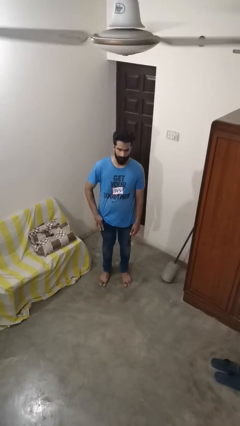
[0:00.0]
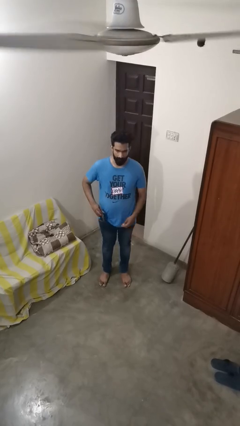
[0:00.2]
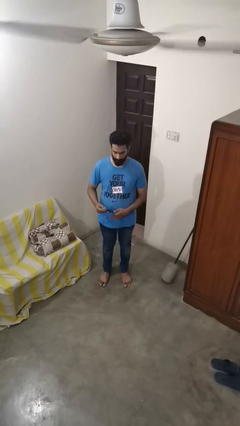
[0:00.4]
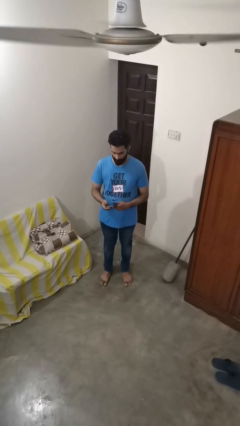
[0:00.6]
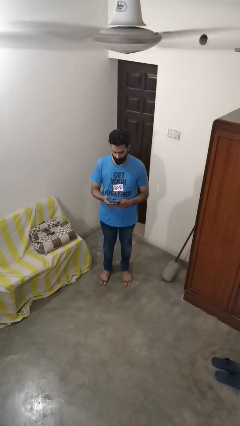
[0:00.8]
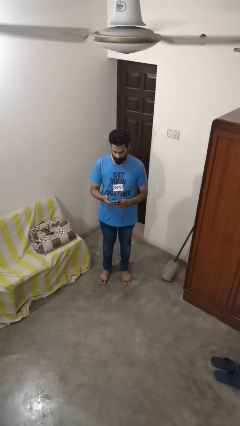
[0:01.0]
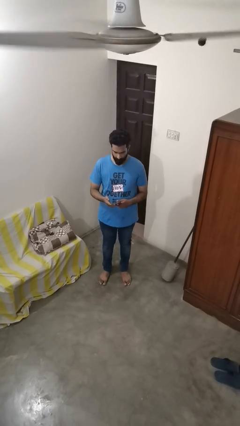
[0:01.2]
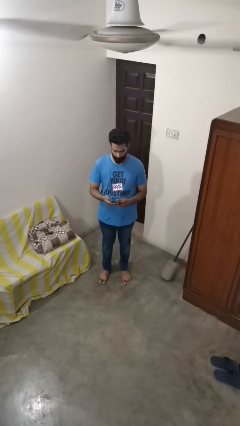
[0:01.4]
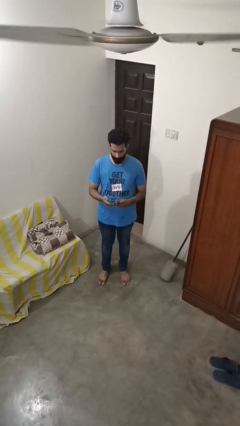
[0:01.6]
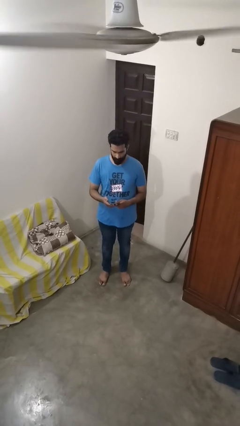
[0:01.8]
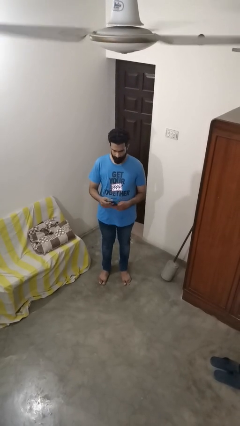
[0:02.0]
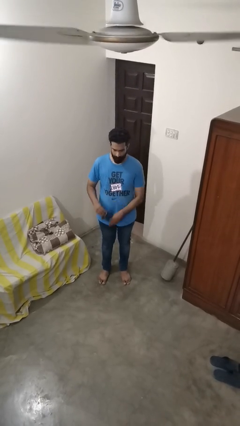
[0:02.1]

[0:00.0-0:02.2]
person takes phone from pocket

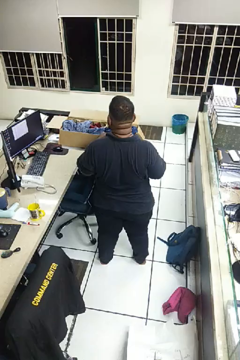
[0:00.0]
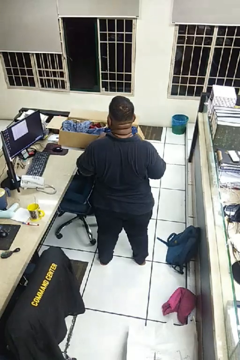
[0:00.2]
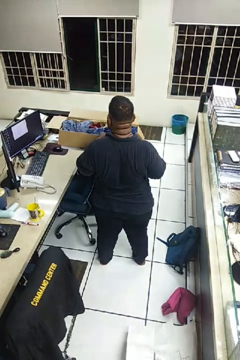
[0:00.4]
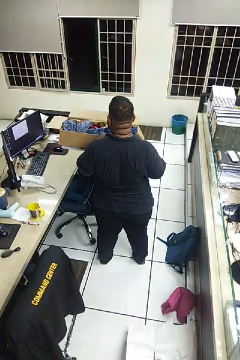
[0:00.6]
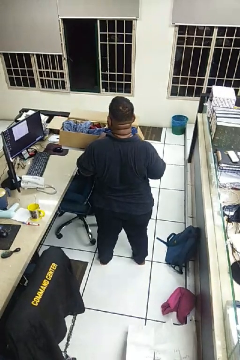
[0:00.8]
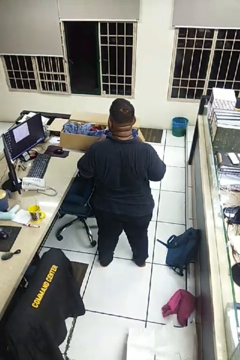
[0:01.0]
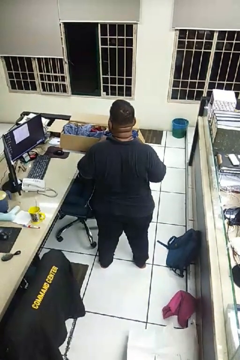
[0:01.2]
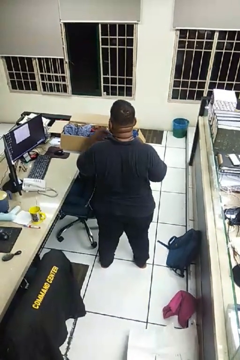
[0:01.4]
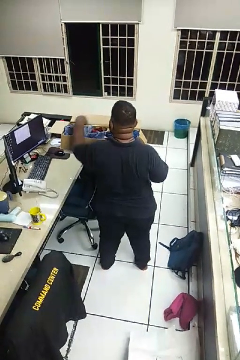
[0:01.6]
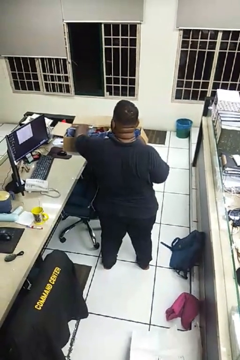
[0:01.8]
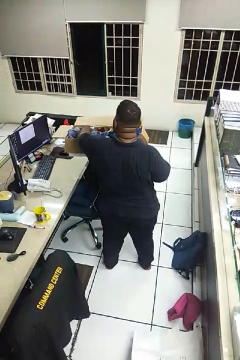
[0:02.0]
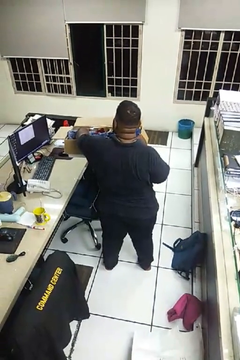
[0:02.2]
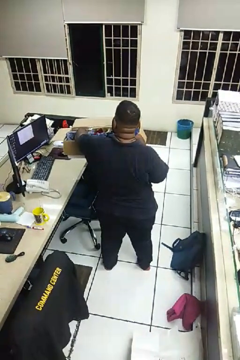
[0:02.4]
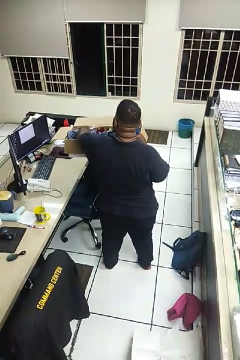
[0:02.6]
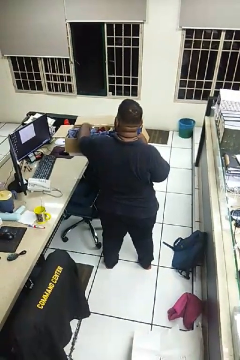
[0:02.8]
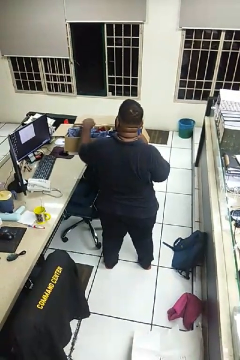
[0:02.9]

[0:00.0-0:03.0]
person searches in box

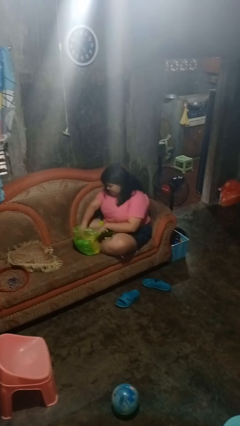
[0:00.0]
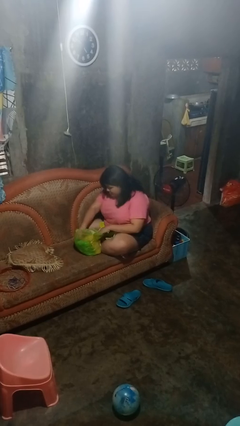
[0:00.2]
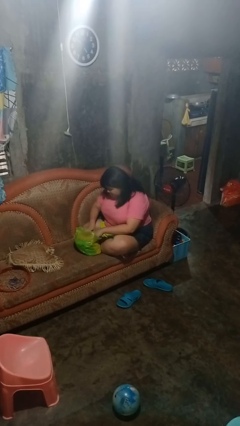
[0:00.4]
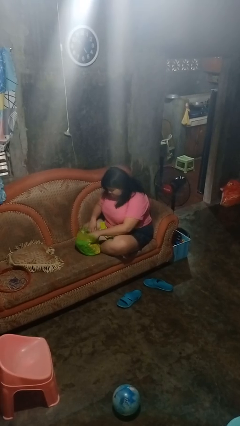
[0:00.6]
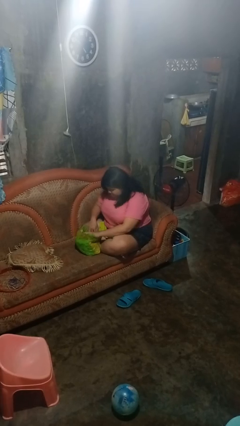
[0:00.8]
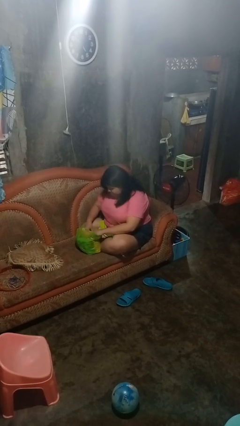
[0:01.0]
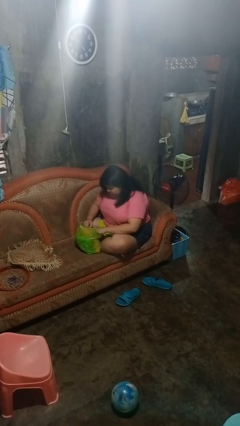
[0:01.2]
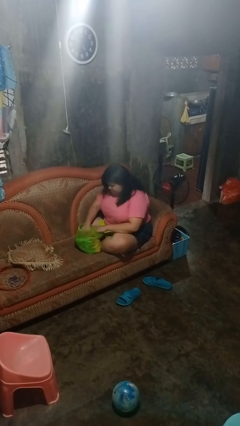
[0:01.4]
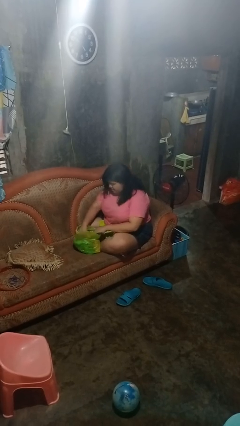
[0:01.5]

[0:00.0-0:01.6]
person searches in bag

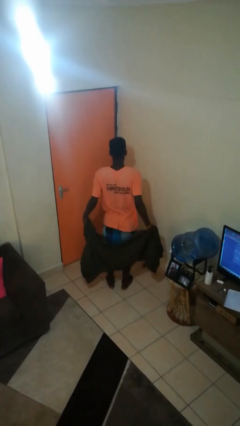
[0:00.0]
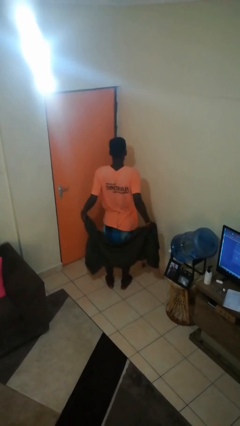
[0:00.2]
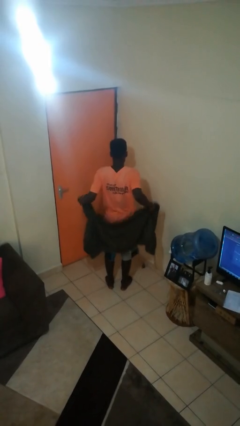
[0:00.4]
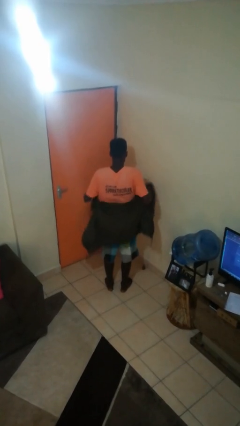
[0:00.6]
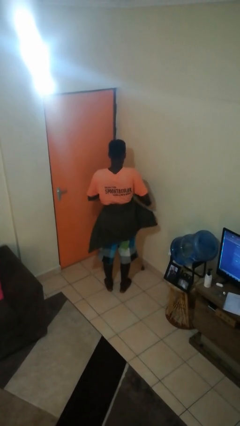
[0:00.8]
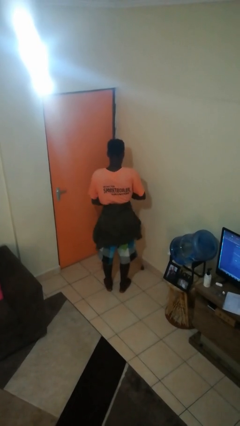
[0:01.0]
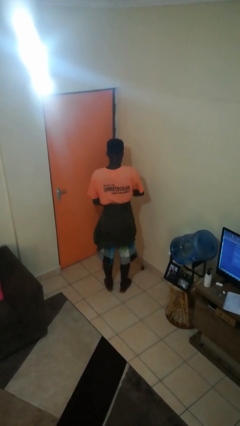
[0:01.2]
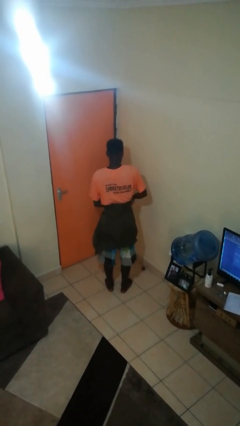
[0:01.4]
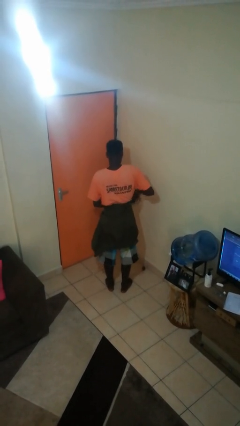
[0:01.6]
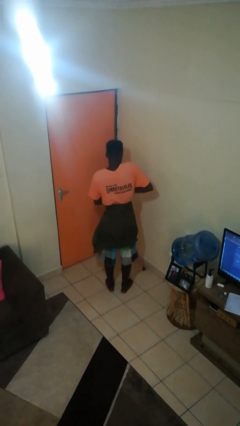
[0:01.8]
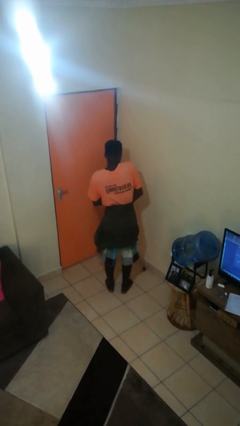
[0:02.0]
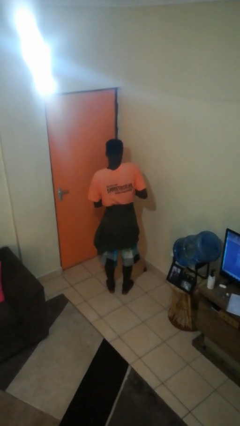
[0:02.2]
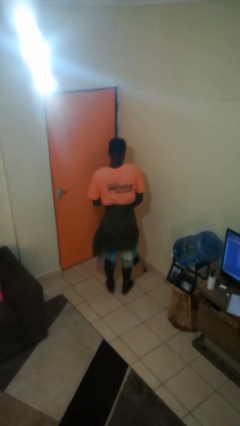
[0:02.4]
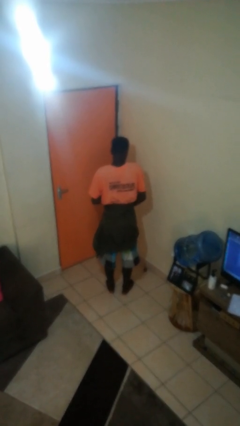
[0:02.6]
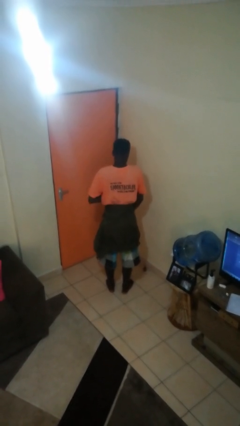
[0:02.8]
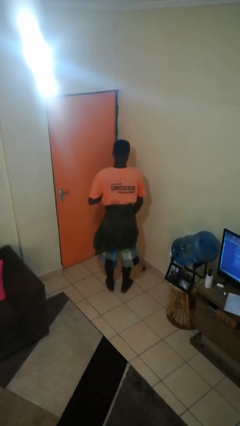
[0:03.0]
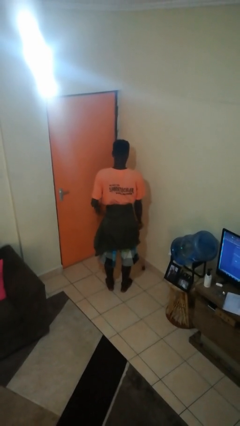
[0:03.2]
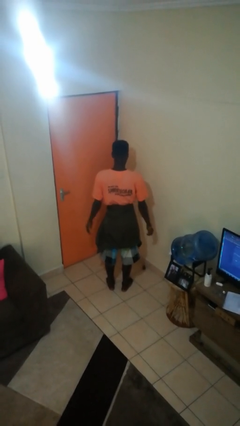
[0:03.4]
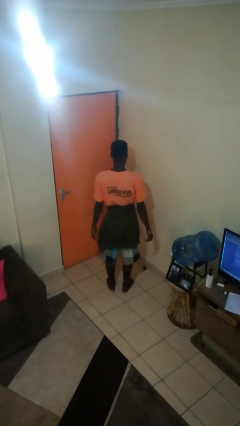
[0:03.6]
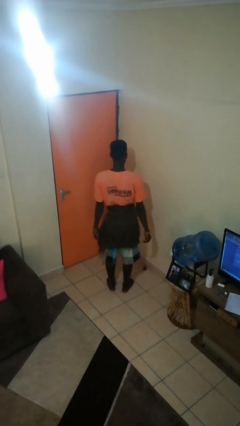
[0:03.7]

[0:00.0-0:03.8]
person ties jacket around waist

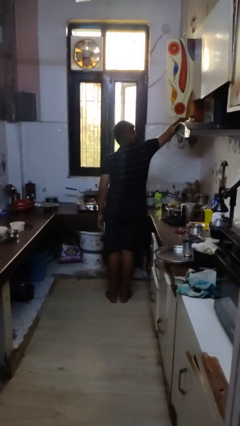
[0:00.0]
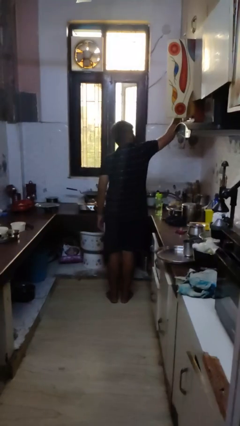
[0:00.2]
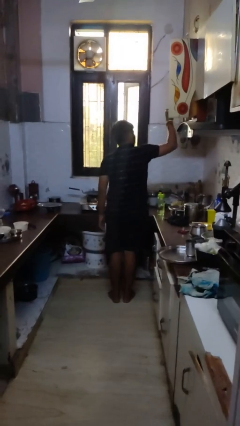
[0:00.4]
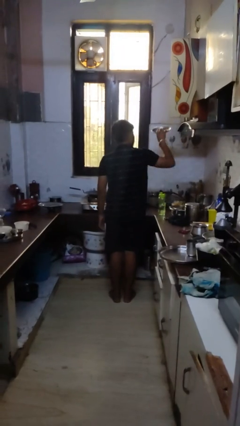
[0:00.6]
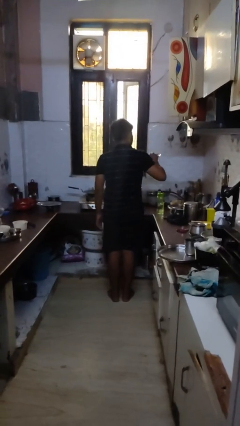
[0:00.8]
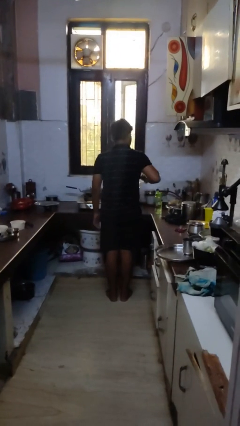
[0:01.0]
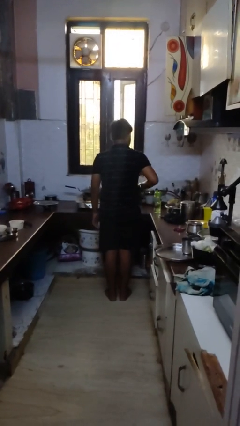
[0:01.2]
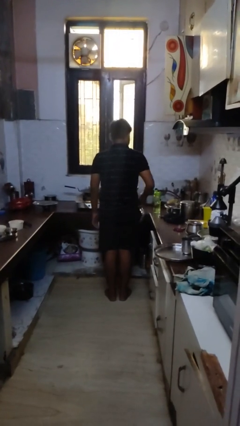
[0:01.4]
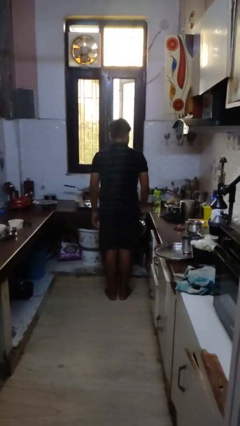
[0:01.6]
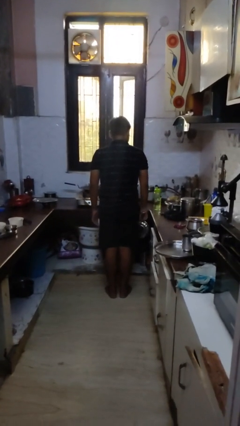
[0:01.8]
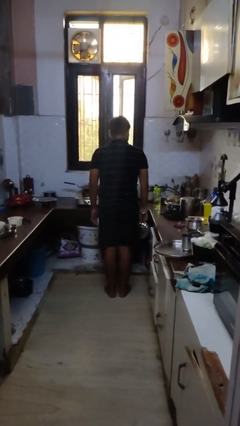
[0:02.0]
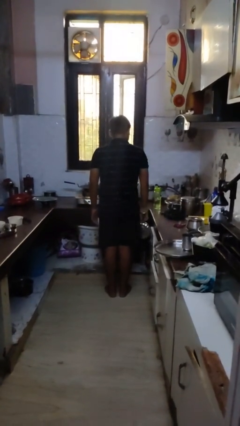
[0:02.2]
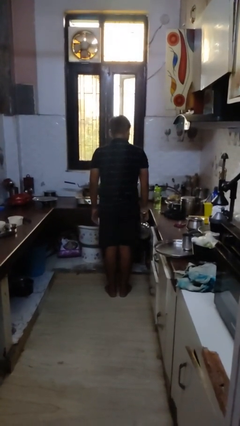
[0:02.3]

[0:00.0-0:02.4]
person takes object from cabinet

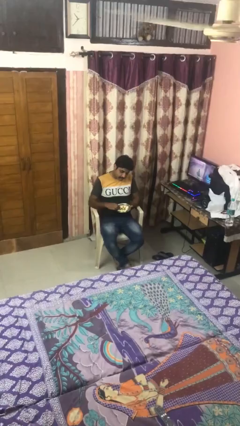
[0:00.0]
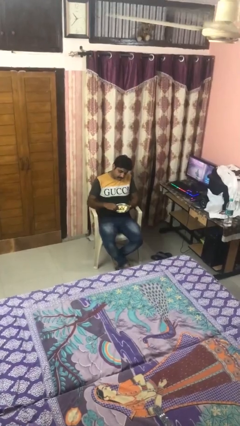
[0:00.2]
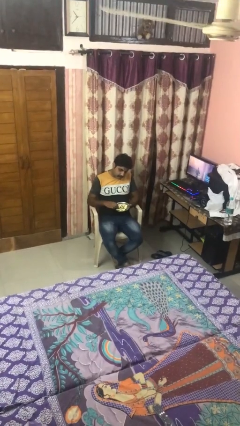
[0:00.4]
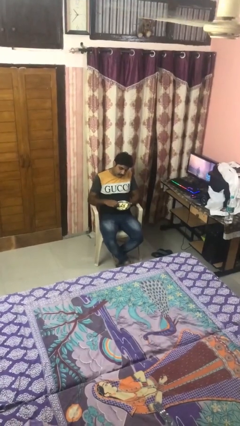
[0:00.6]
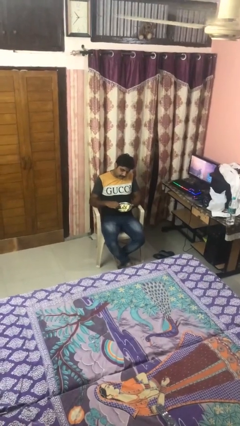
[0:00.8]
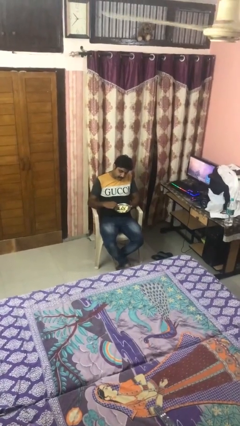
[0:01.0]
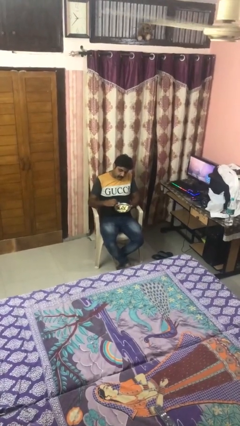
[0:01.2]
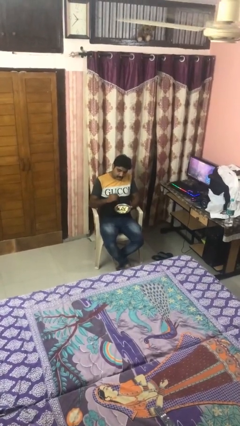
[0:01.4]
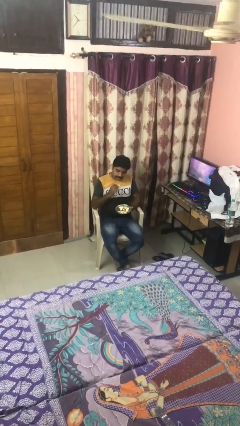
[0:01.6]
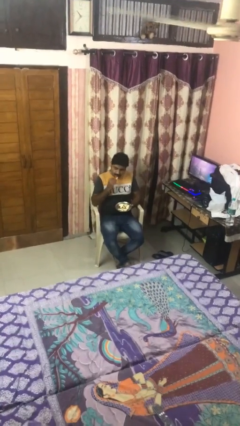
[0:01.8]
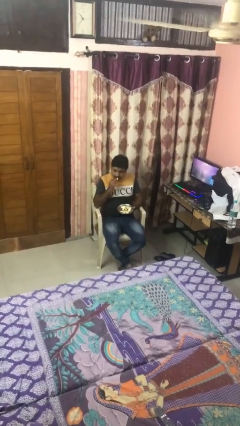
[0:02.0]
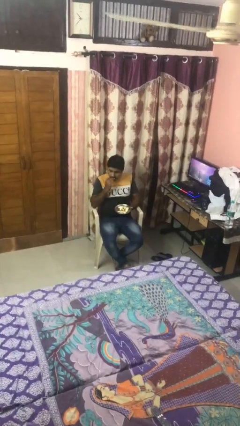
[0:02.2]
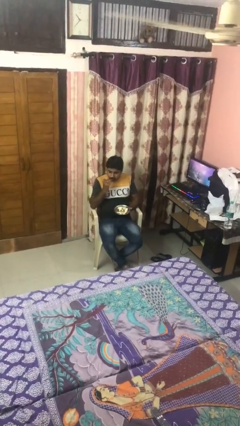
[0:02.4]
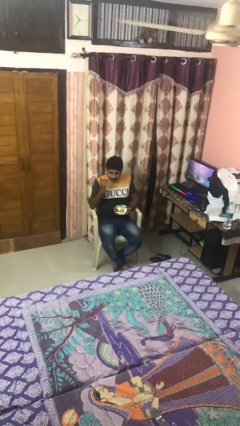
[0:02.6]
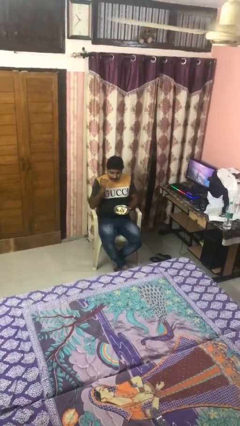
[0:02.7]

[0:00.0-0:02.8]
person eats with hands

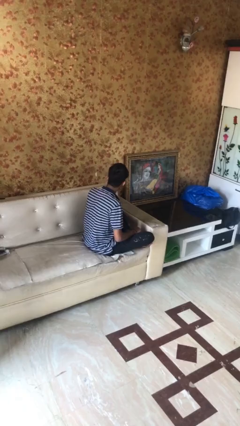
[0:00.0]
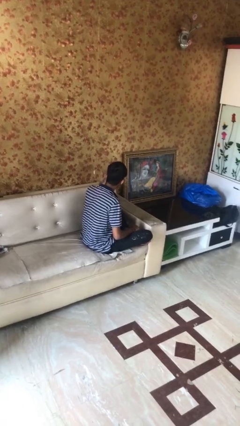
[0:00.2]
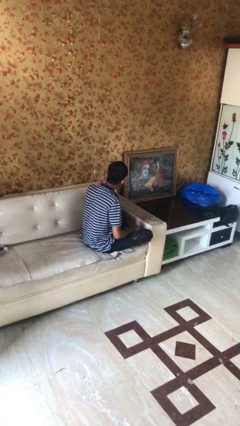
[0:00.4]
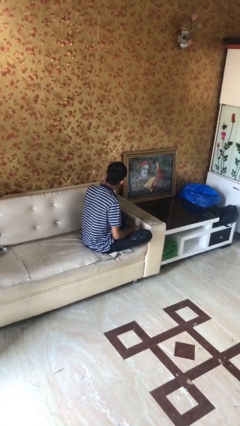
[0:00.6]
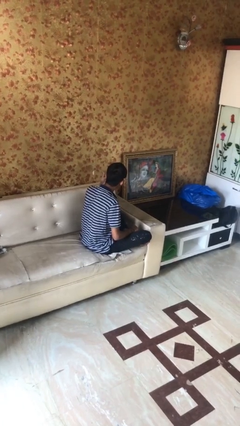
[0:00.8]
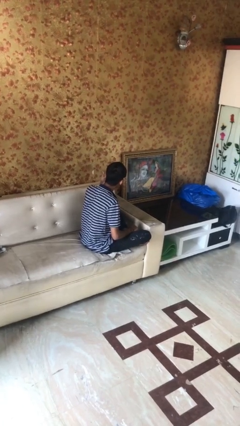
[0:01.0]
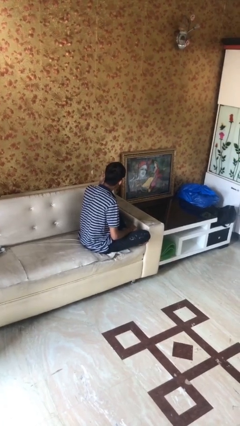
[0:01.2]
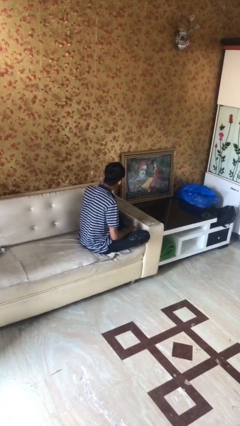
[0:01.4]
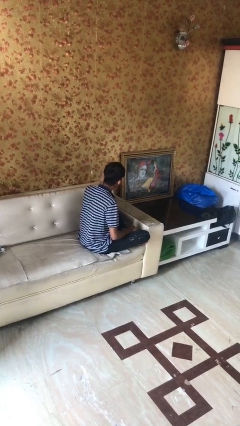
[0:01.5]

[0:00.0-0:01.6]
person rubs eyes

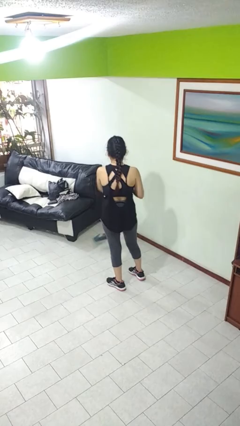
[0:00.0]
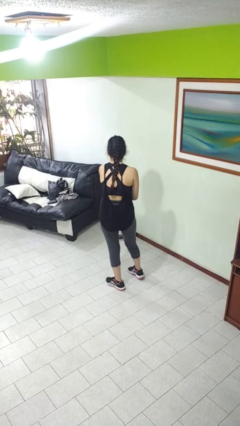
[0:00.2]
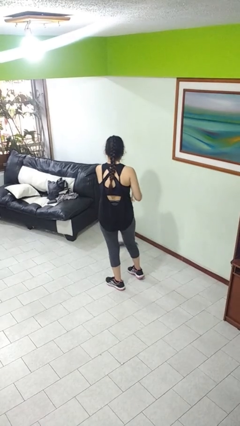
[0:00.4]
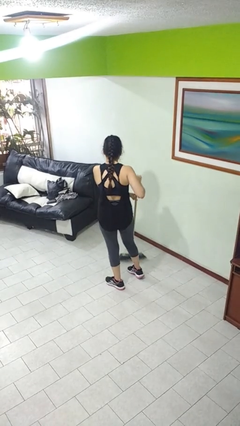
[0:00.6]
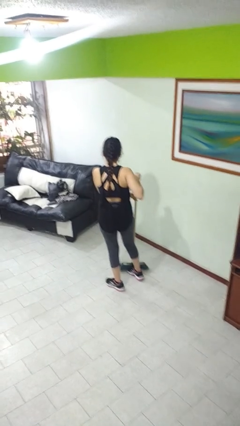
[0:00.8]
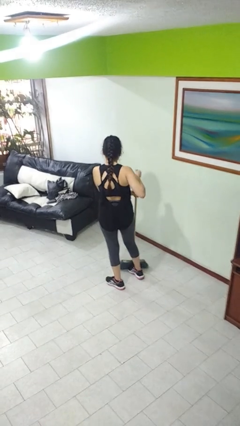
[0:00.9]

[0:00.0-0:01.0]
person sweeps floor
